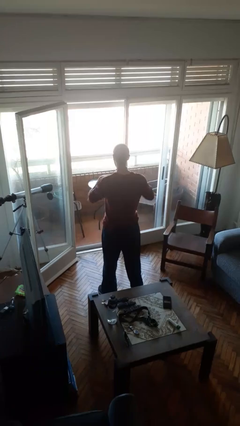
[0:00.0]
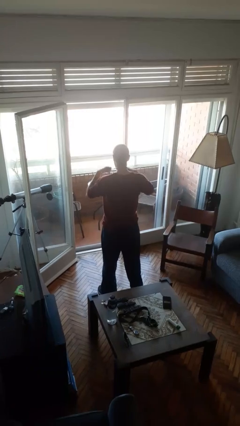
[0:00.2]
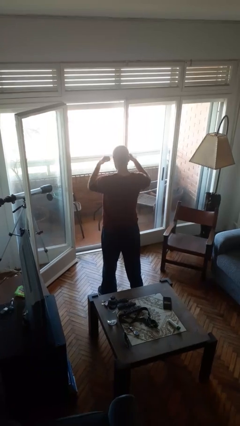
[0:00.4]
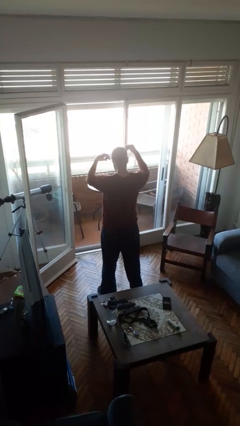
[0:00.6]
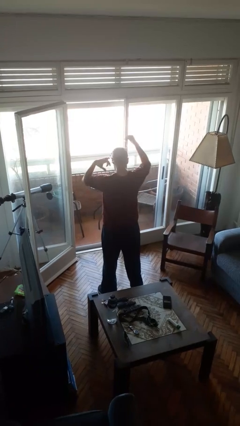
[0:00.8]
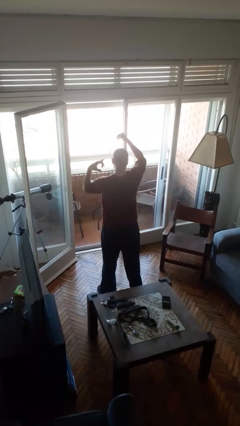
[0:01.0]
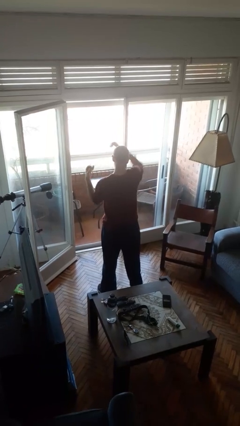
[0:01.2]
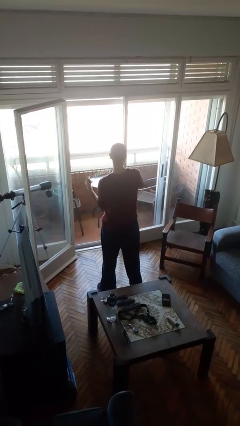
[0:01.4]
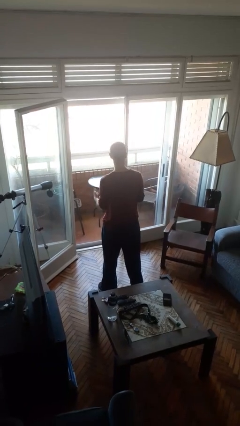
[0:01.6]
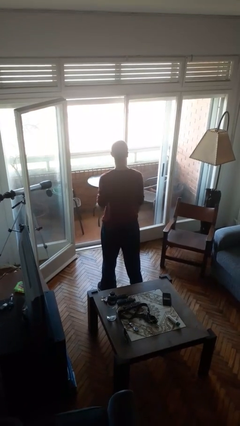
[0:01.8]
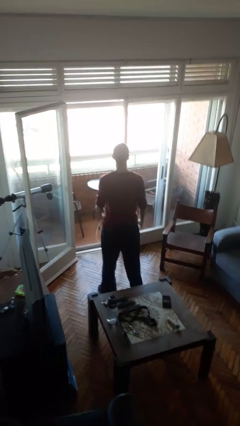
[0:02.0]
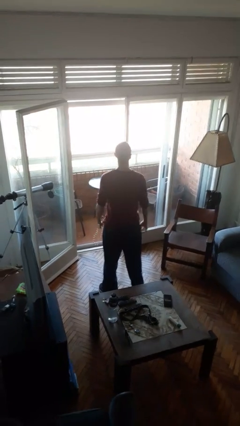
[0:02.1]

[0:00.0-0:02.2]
person takes off necklace

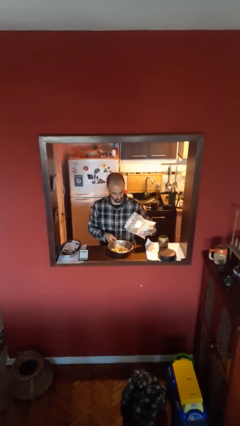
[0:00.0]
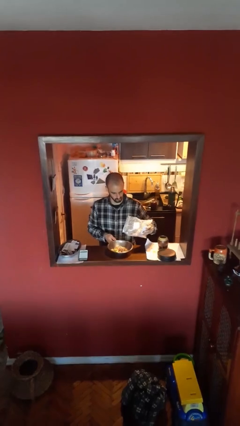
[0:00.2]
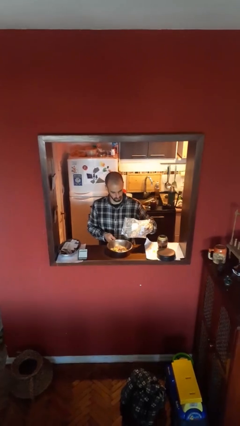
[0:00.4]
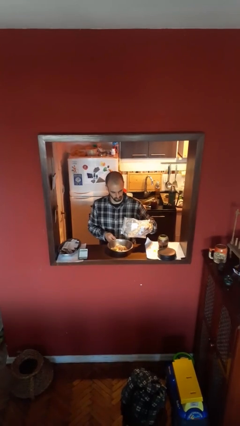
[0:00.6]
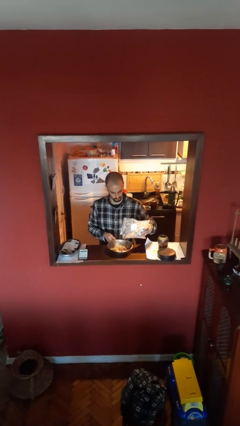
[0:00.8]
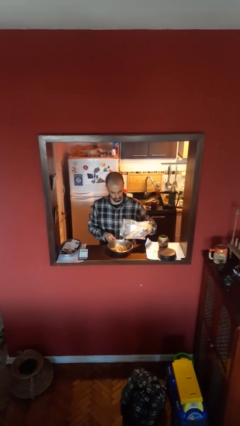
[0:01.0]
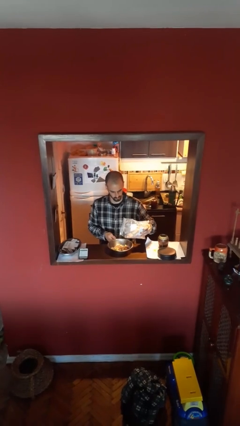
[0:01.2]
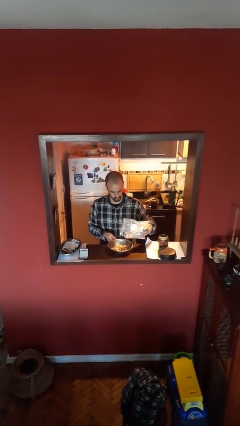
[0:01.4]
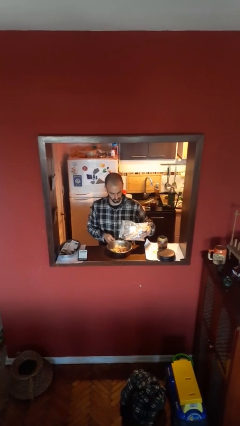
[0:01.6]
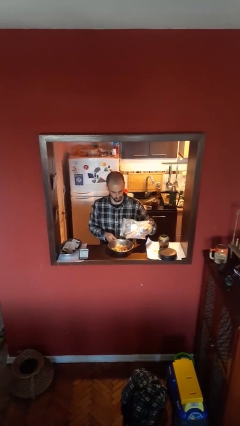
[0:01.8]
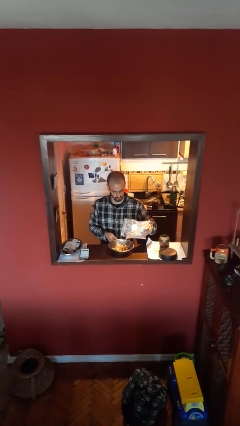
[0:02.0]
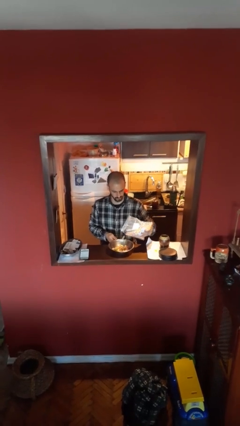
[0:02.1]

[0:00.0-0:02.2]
person pours into bowl

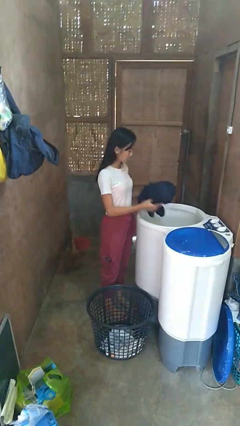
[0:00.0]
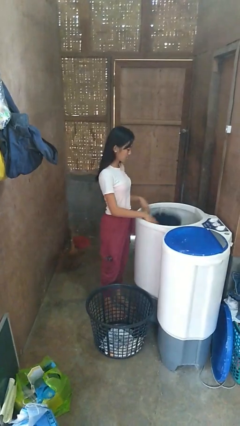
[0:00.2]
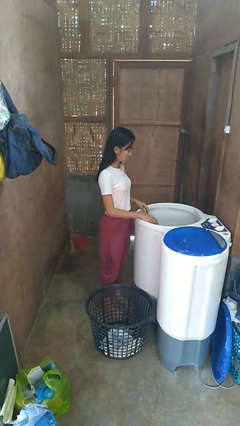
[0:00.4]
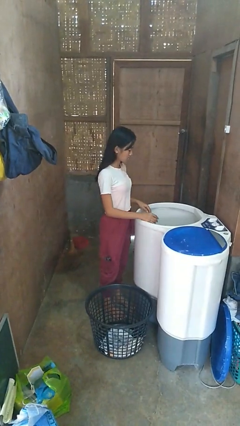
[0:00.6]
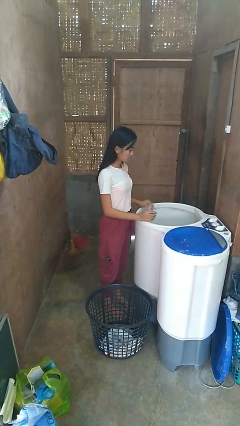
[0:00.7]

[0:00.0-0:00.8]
person loads clotheswasher

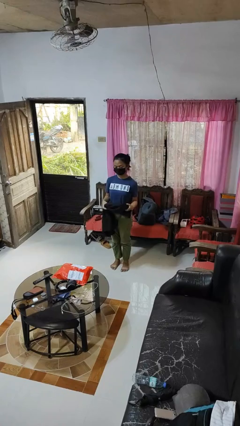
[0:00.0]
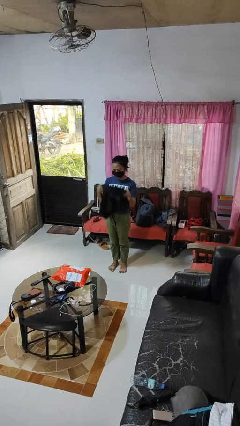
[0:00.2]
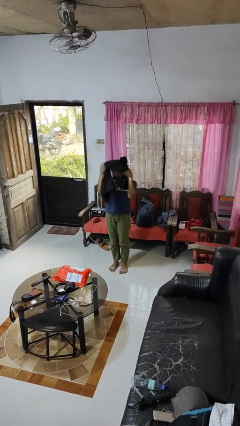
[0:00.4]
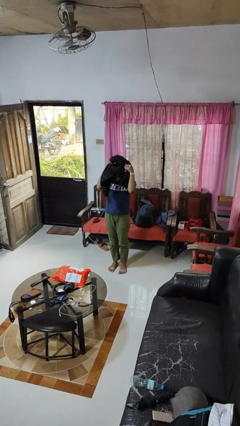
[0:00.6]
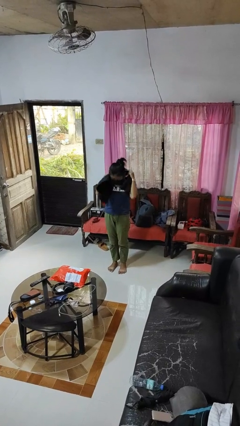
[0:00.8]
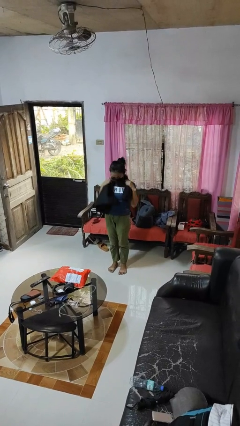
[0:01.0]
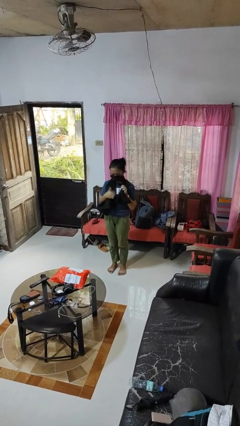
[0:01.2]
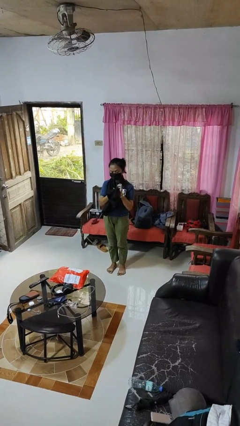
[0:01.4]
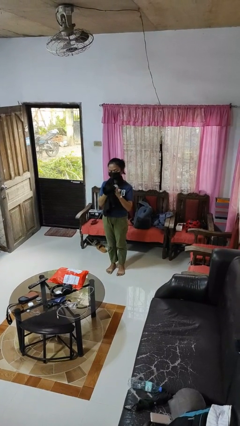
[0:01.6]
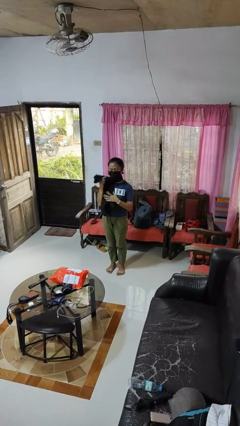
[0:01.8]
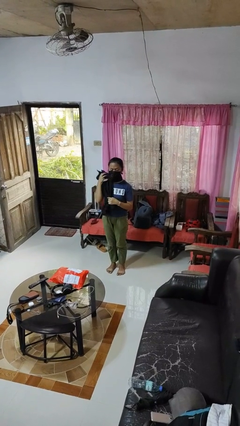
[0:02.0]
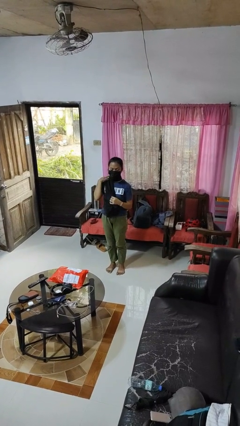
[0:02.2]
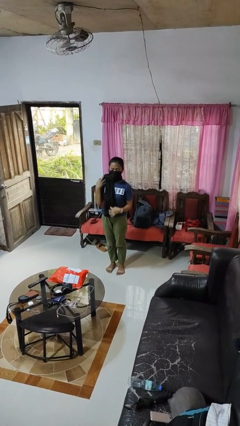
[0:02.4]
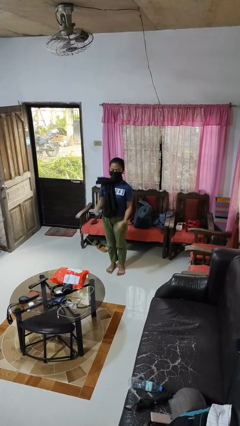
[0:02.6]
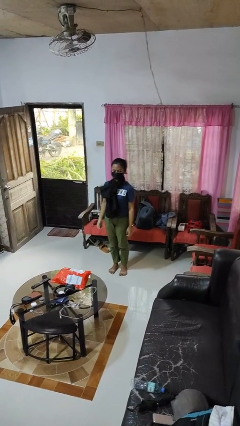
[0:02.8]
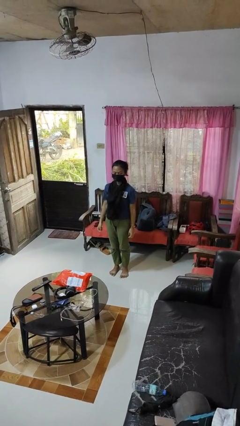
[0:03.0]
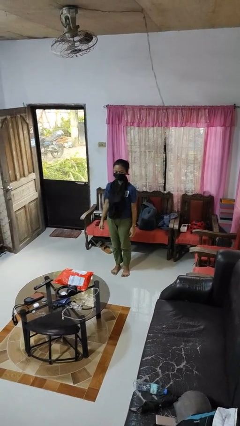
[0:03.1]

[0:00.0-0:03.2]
person puts on scarf

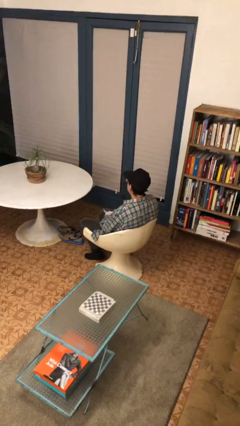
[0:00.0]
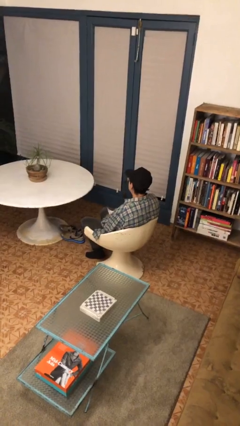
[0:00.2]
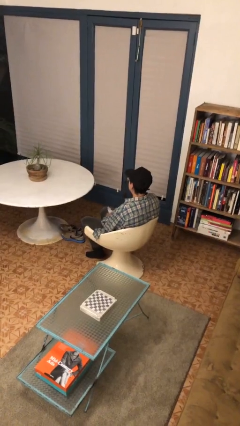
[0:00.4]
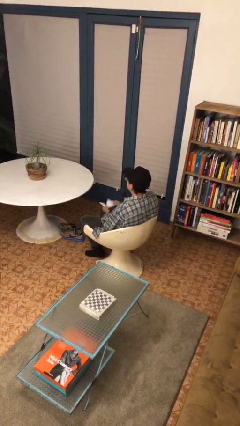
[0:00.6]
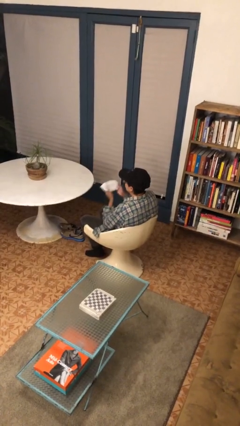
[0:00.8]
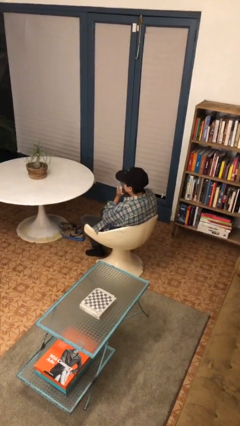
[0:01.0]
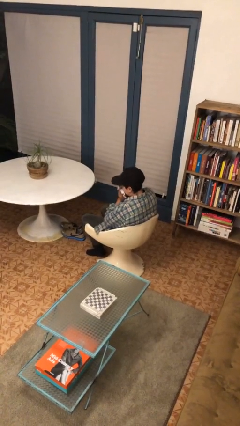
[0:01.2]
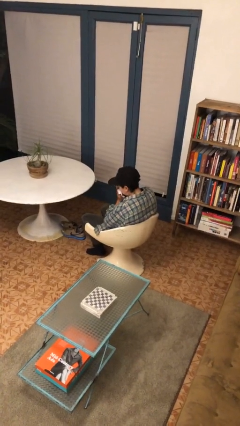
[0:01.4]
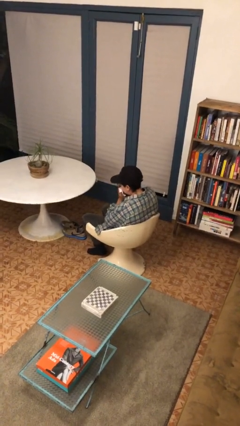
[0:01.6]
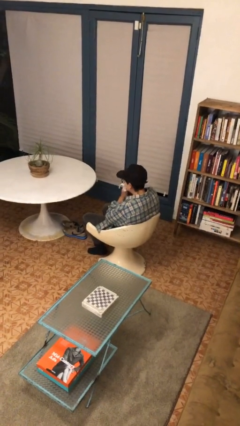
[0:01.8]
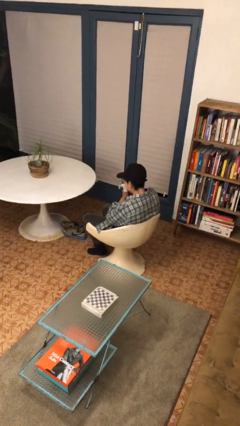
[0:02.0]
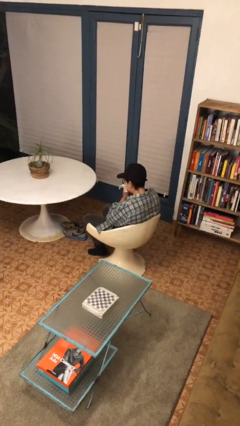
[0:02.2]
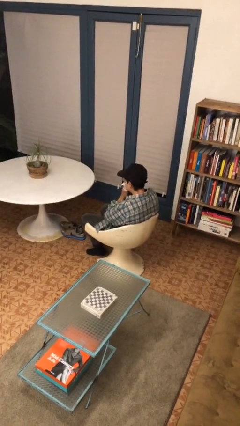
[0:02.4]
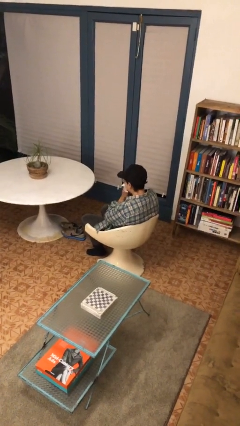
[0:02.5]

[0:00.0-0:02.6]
person blows nose

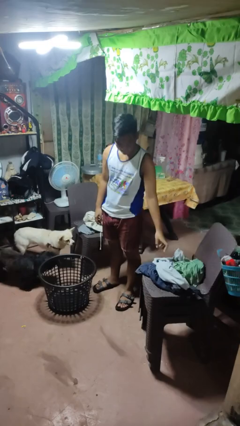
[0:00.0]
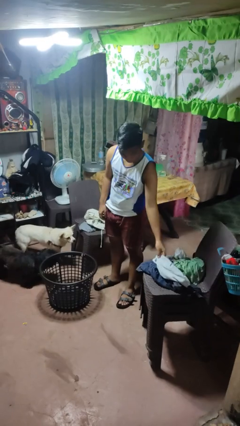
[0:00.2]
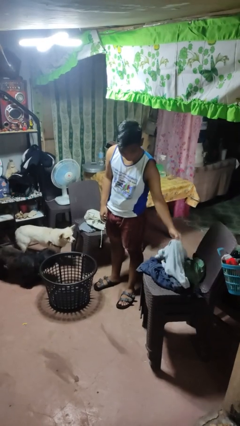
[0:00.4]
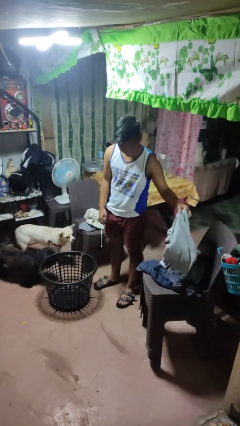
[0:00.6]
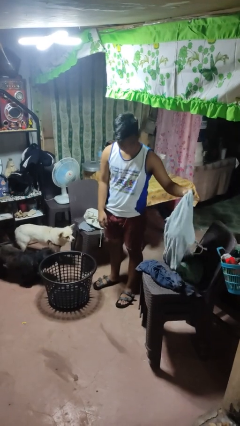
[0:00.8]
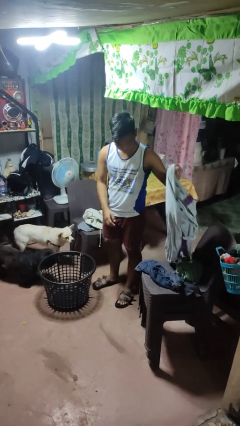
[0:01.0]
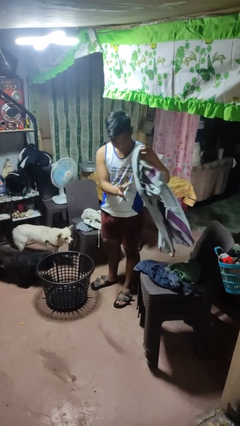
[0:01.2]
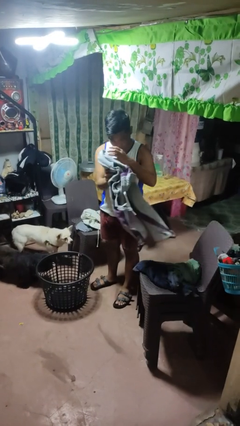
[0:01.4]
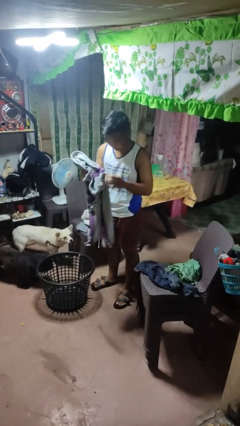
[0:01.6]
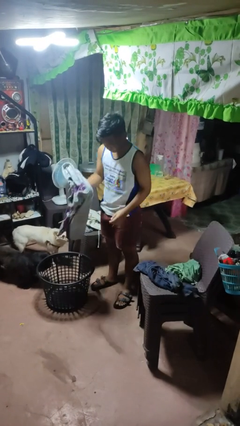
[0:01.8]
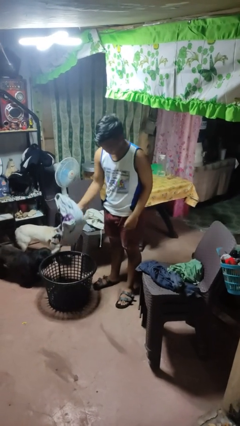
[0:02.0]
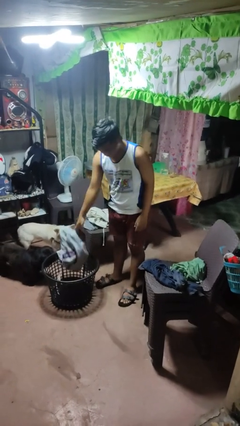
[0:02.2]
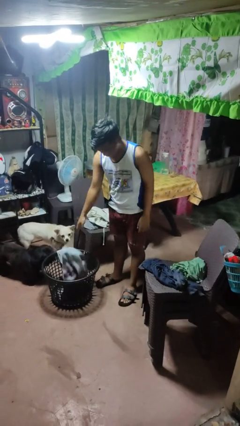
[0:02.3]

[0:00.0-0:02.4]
person puts object into basket

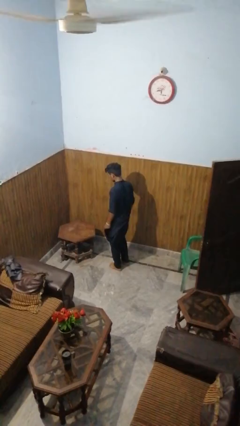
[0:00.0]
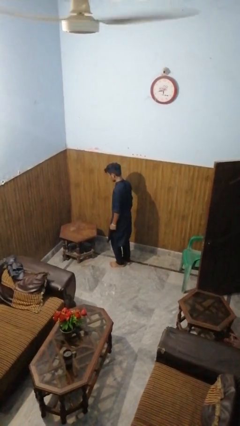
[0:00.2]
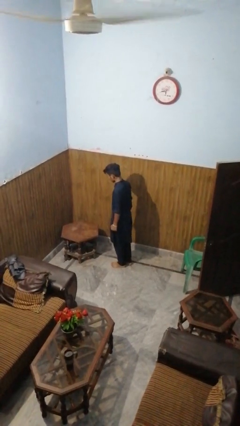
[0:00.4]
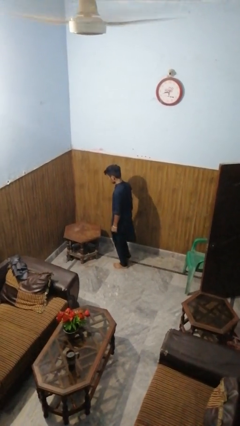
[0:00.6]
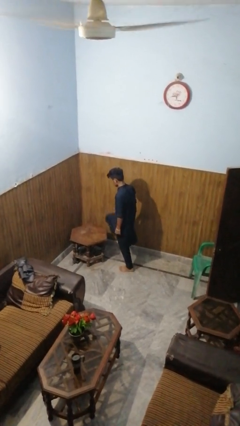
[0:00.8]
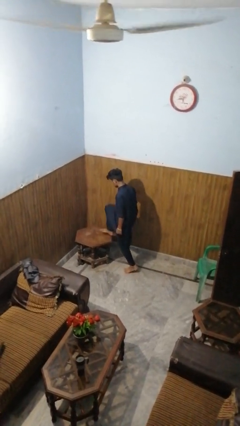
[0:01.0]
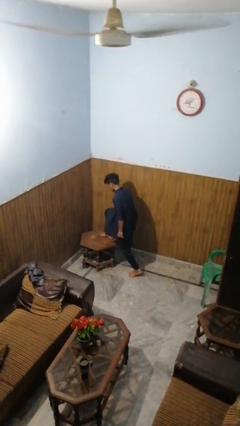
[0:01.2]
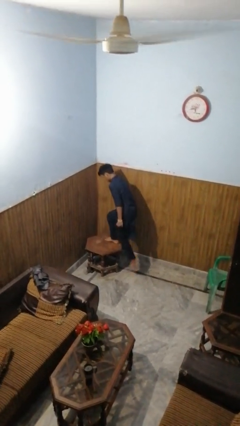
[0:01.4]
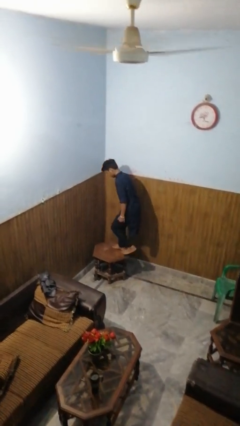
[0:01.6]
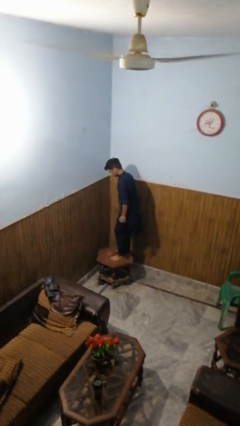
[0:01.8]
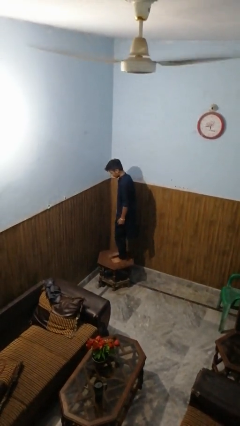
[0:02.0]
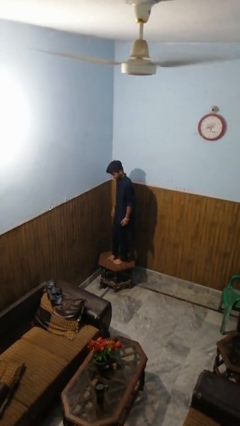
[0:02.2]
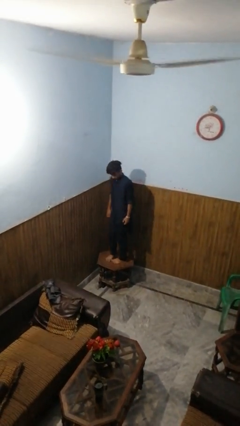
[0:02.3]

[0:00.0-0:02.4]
person climbs on table

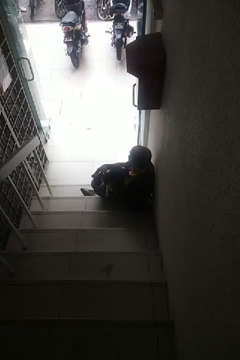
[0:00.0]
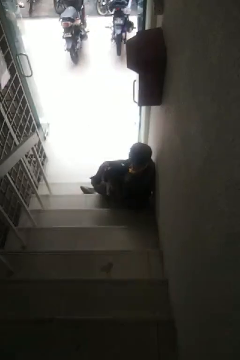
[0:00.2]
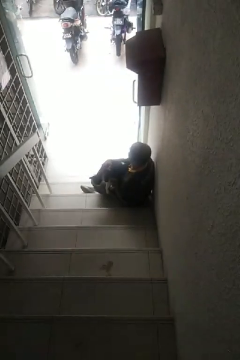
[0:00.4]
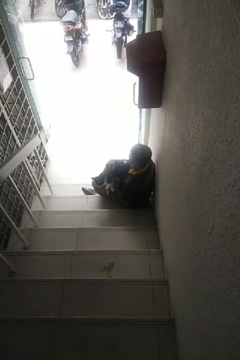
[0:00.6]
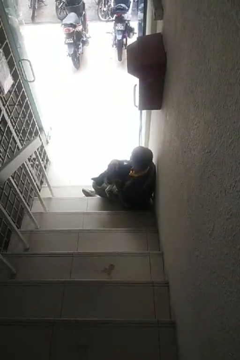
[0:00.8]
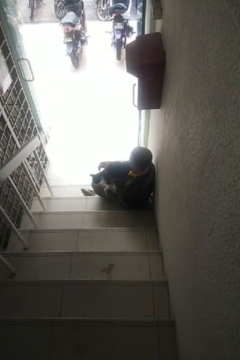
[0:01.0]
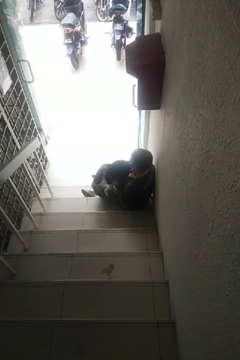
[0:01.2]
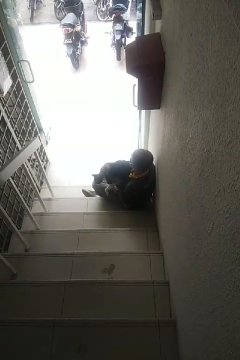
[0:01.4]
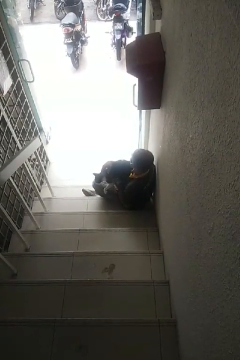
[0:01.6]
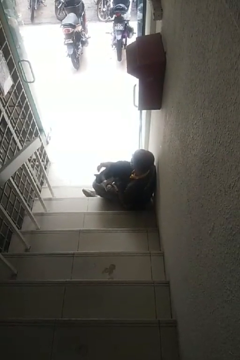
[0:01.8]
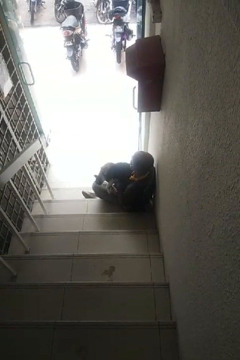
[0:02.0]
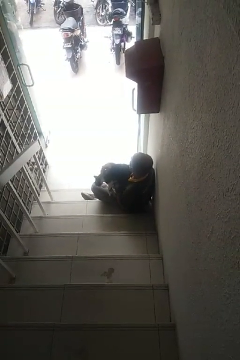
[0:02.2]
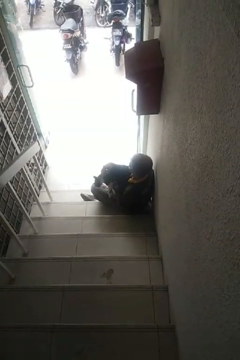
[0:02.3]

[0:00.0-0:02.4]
person pets cat
